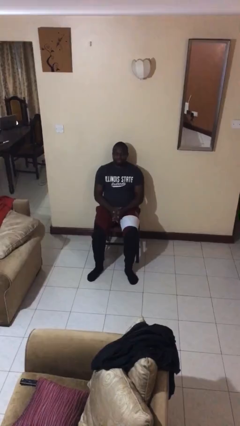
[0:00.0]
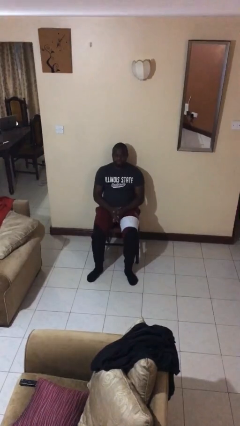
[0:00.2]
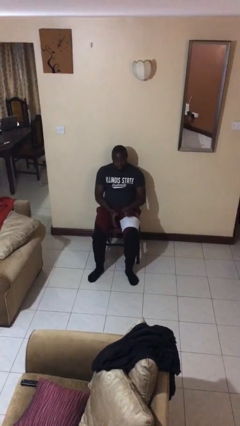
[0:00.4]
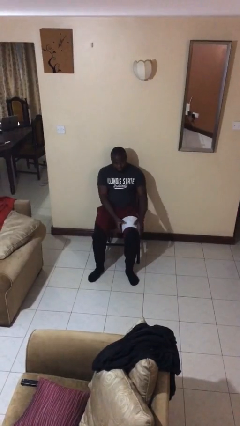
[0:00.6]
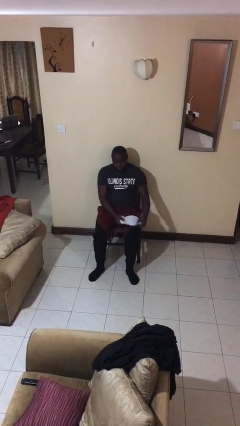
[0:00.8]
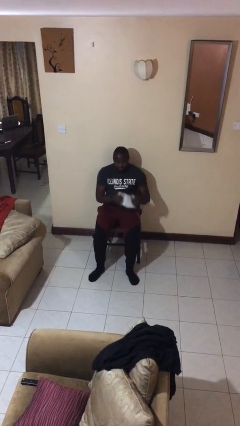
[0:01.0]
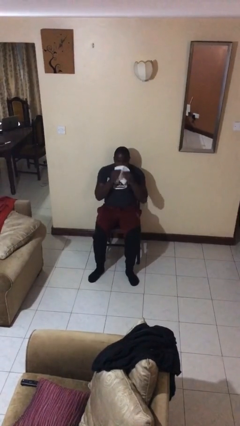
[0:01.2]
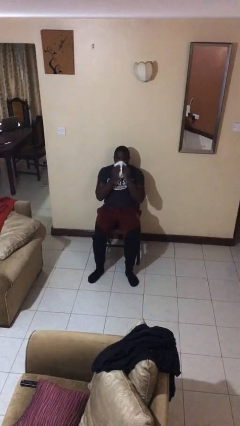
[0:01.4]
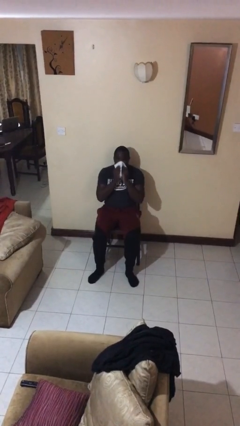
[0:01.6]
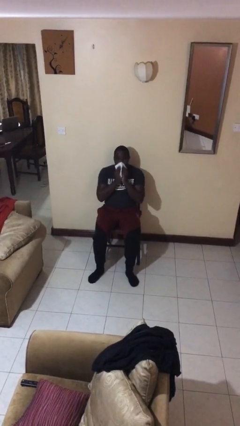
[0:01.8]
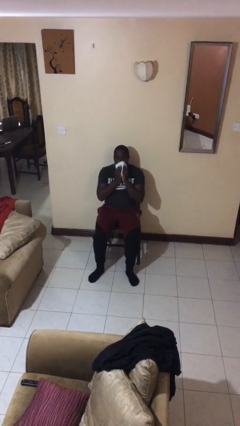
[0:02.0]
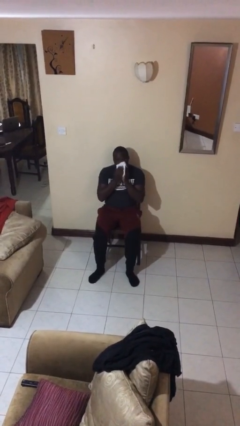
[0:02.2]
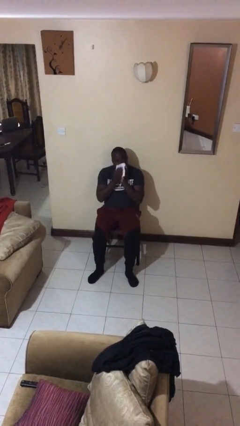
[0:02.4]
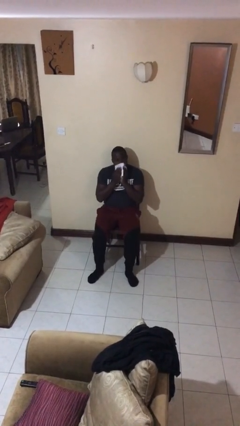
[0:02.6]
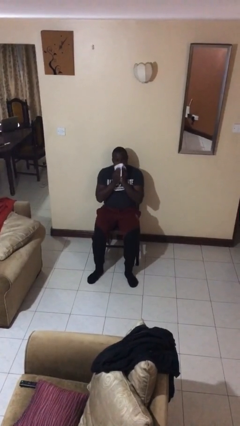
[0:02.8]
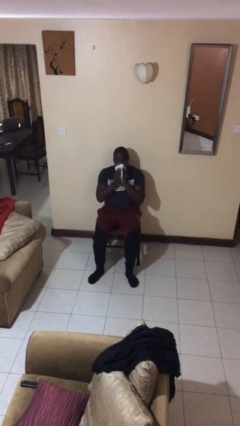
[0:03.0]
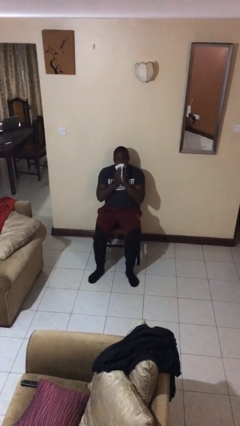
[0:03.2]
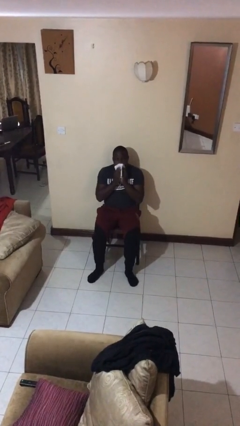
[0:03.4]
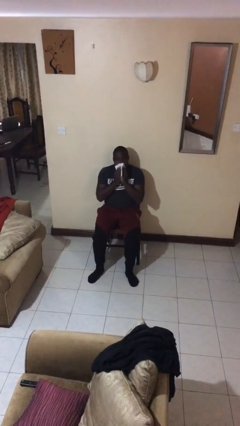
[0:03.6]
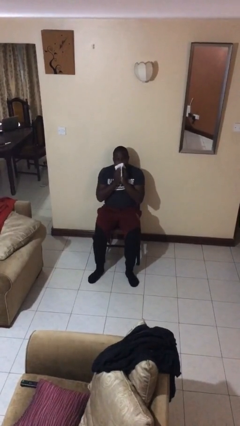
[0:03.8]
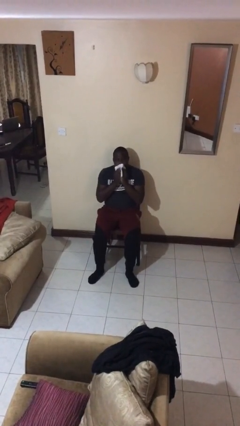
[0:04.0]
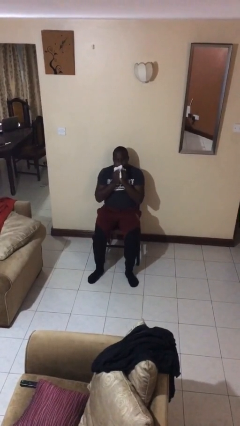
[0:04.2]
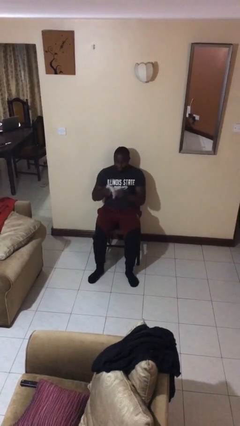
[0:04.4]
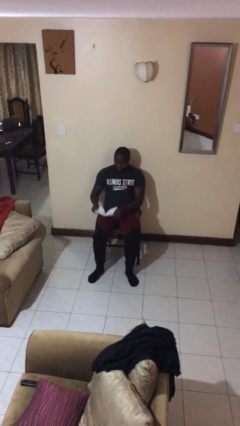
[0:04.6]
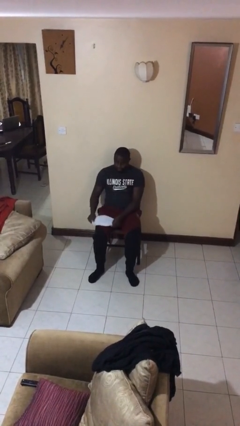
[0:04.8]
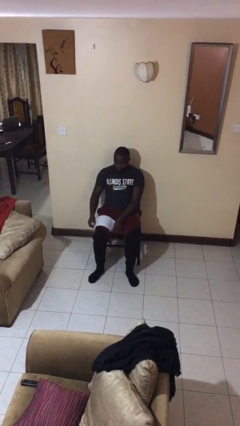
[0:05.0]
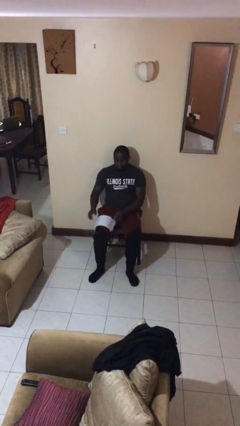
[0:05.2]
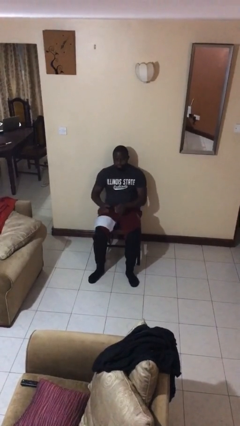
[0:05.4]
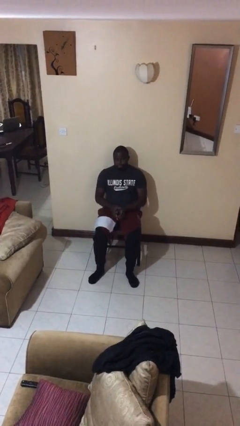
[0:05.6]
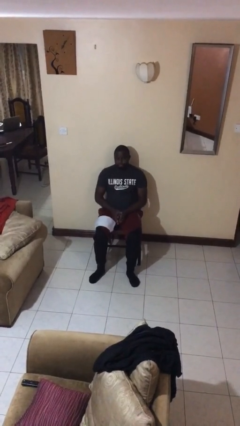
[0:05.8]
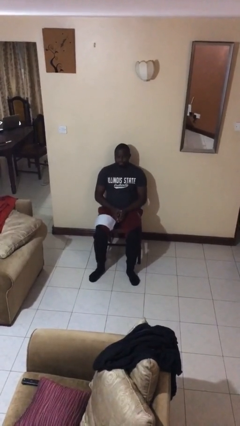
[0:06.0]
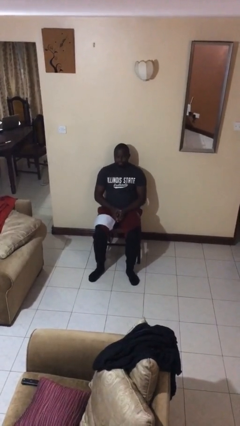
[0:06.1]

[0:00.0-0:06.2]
person wipes mouth with napkin

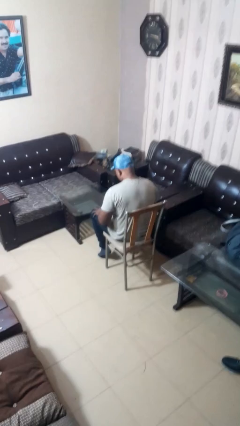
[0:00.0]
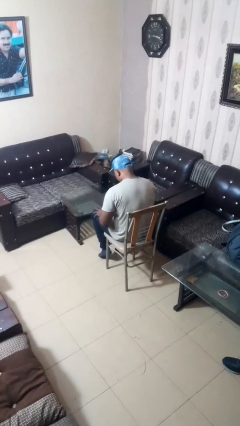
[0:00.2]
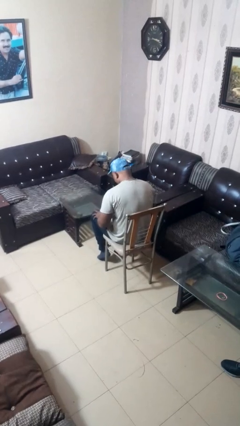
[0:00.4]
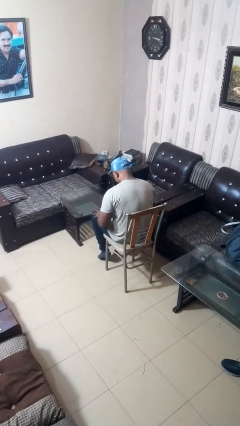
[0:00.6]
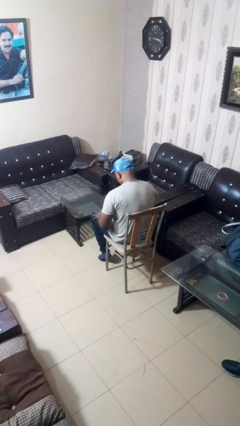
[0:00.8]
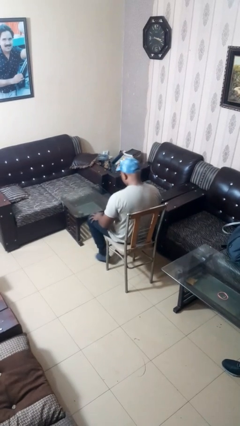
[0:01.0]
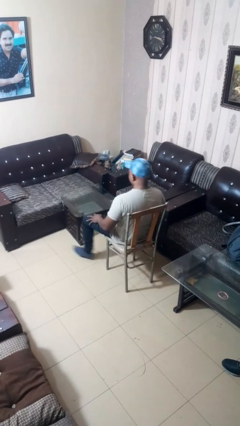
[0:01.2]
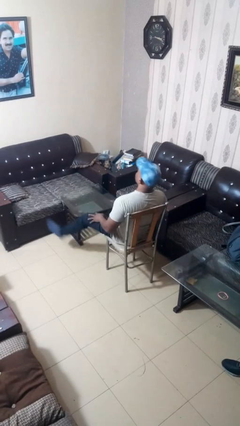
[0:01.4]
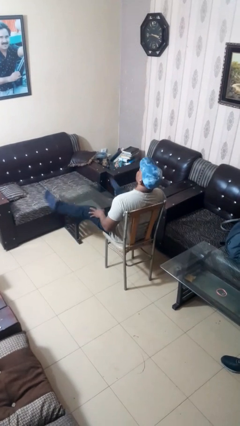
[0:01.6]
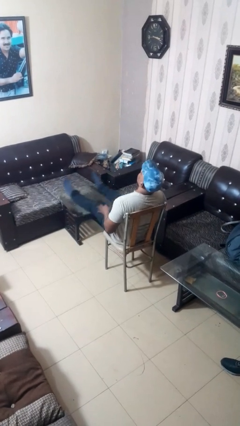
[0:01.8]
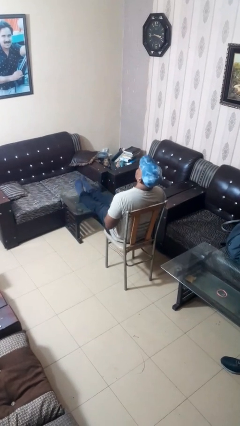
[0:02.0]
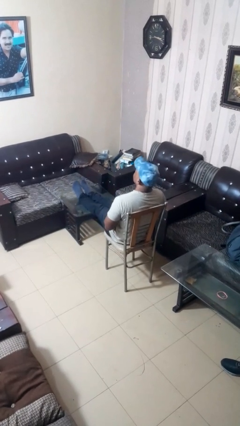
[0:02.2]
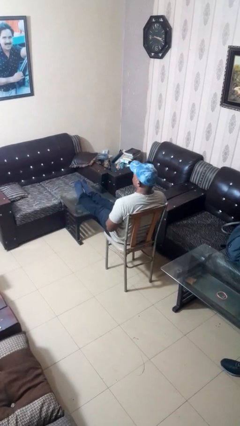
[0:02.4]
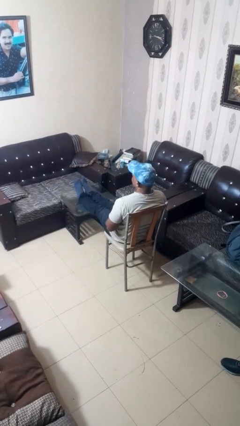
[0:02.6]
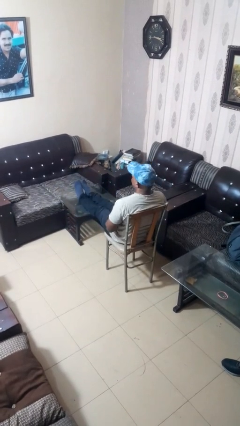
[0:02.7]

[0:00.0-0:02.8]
person puts feet up

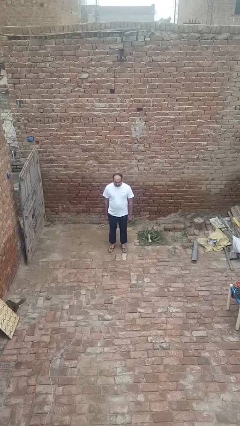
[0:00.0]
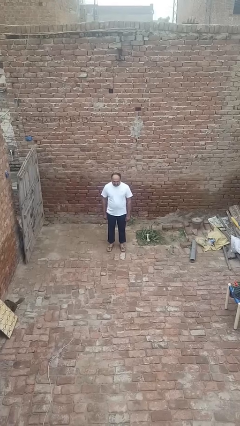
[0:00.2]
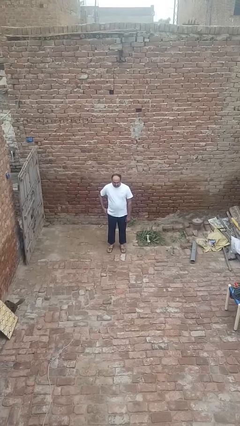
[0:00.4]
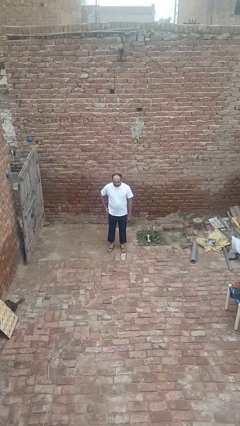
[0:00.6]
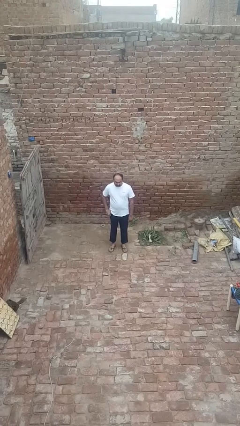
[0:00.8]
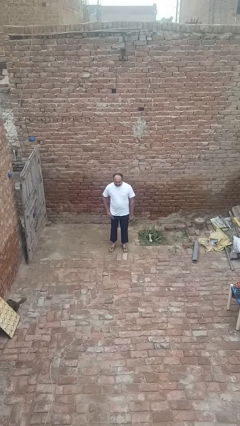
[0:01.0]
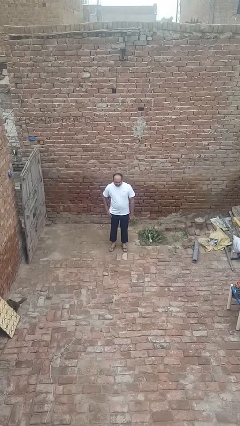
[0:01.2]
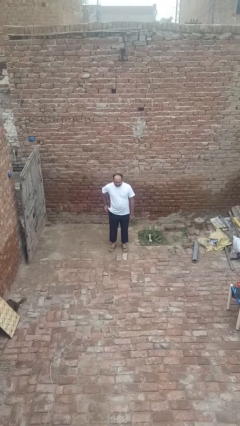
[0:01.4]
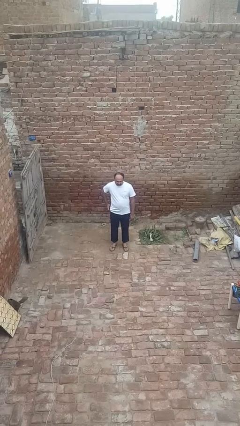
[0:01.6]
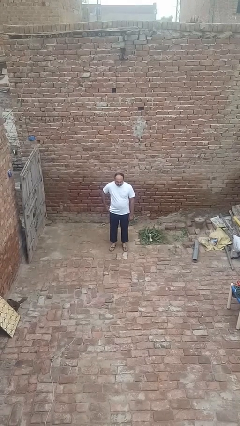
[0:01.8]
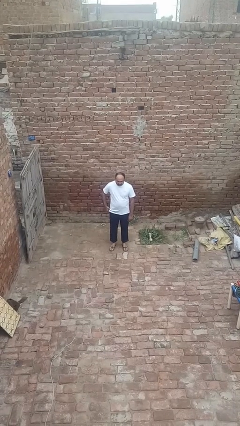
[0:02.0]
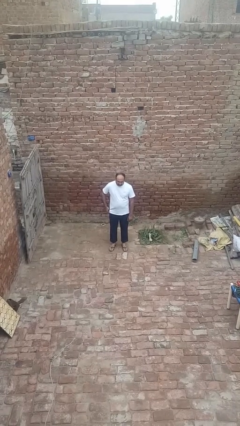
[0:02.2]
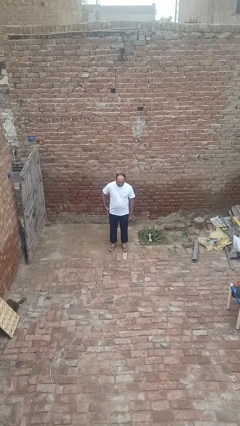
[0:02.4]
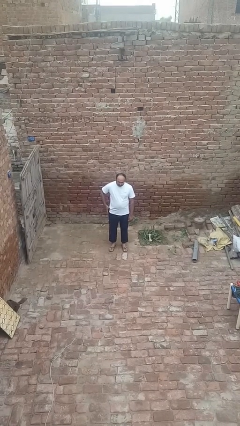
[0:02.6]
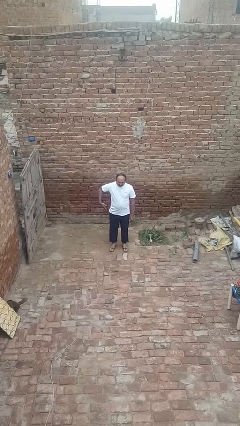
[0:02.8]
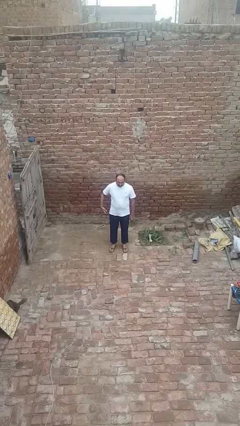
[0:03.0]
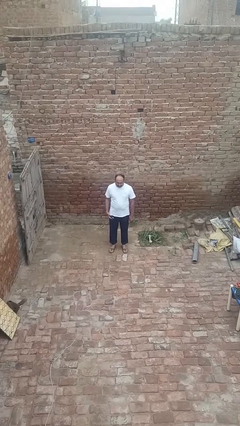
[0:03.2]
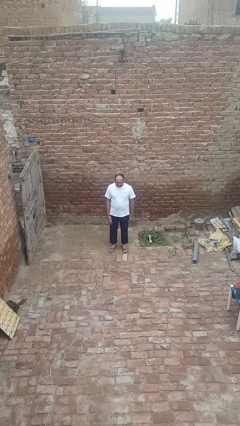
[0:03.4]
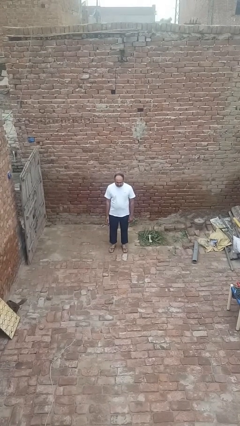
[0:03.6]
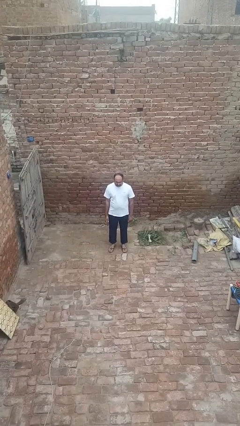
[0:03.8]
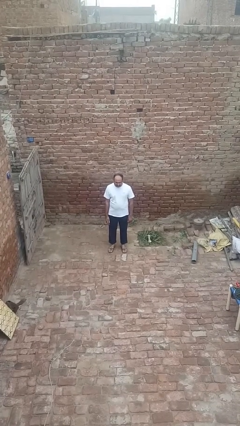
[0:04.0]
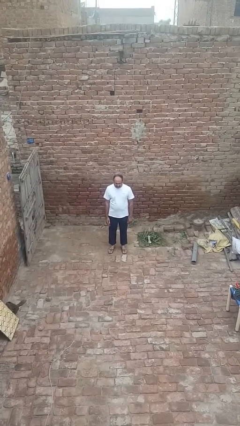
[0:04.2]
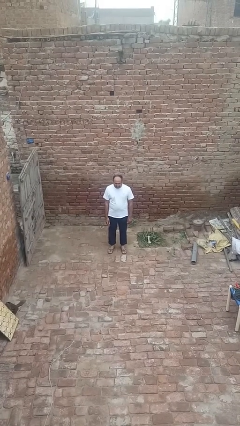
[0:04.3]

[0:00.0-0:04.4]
person takes phone from pocket

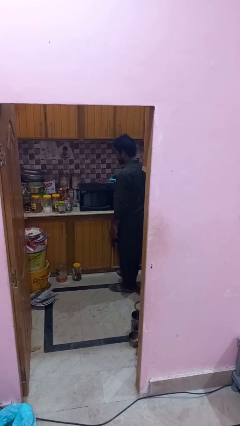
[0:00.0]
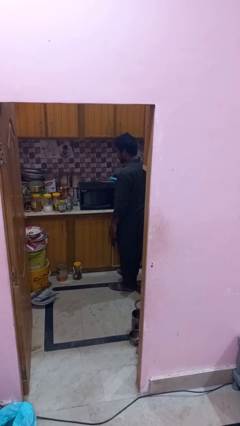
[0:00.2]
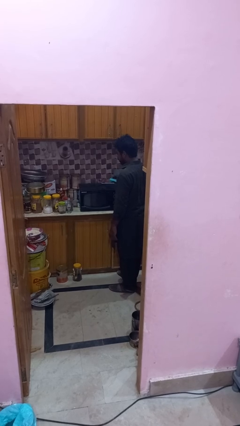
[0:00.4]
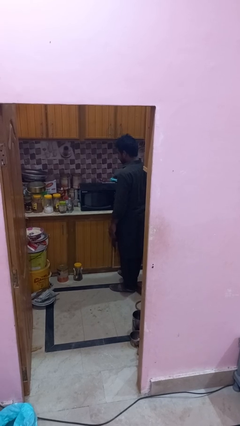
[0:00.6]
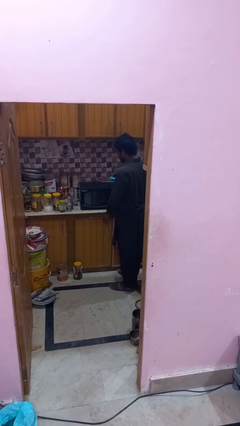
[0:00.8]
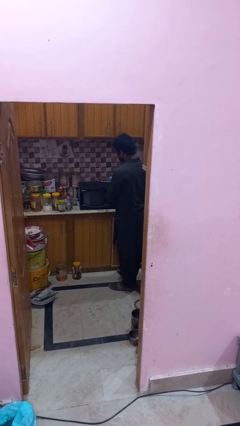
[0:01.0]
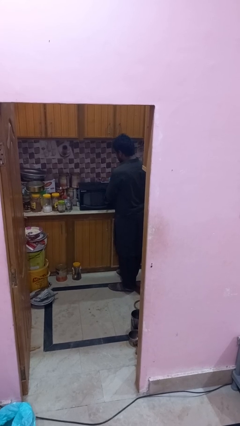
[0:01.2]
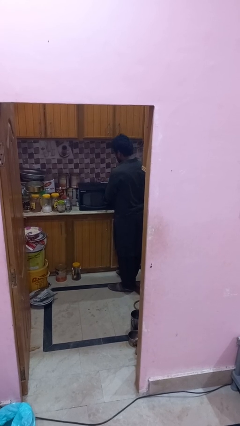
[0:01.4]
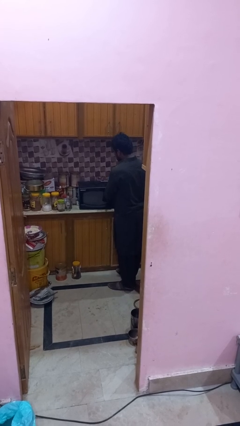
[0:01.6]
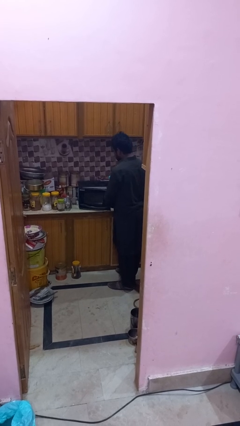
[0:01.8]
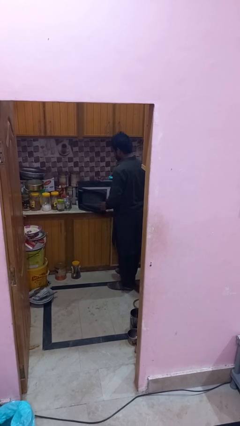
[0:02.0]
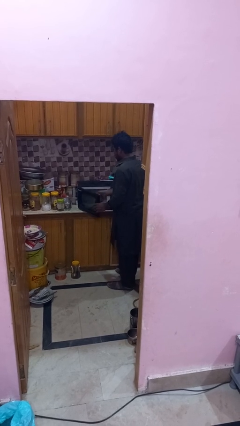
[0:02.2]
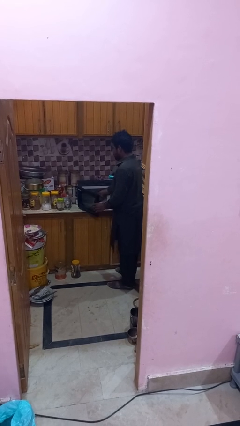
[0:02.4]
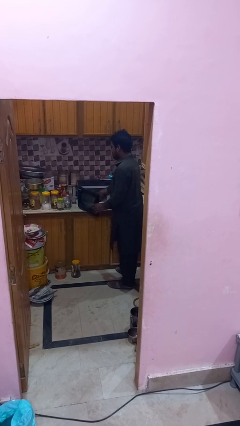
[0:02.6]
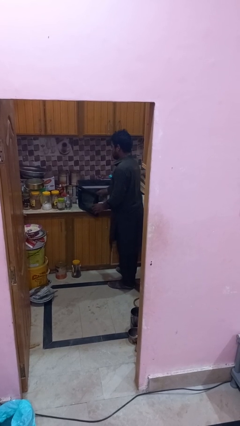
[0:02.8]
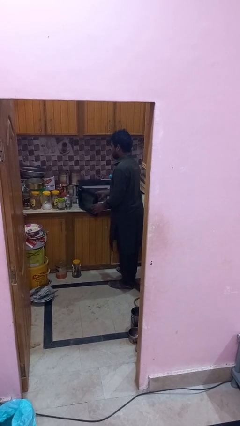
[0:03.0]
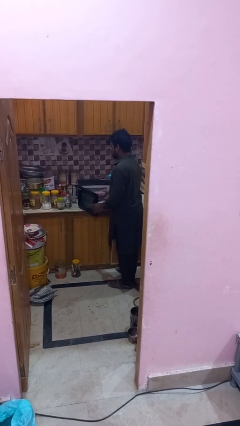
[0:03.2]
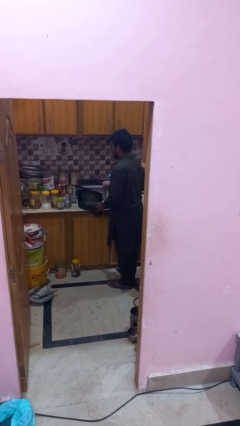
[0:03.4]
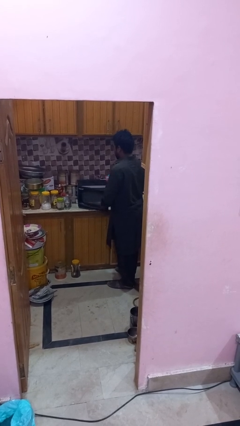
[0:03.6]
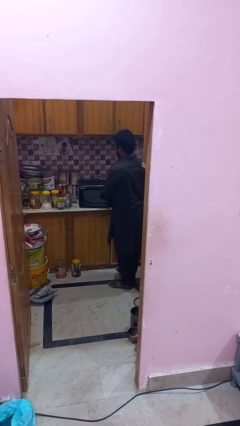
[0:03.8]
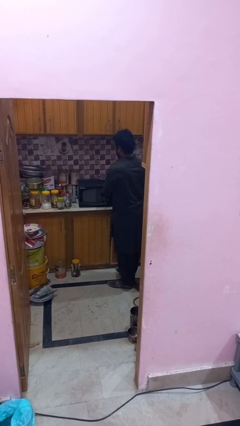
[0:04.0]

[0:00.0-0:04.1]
person takes object from microwave

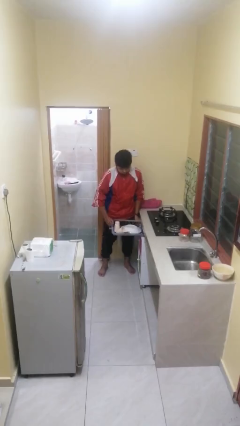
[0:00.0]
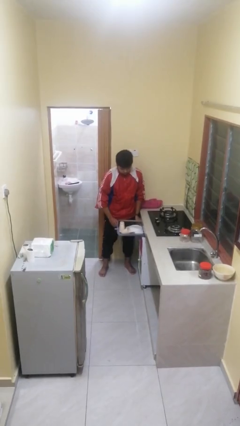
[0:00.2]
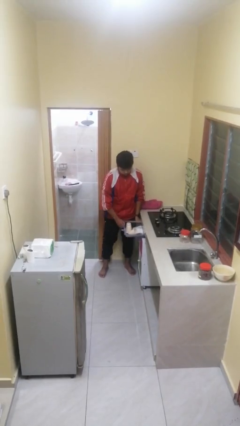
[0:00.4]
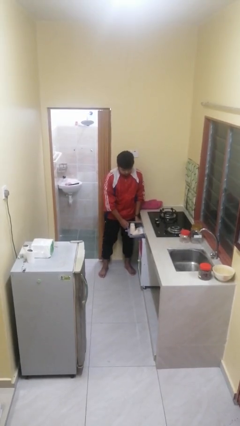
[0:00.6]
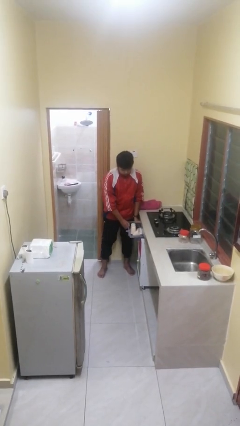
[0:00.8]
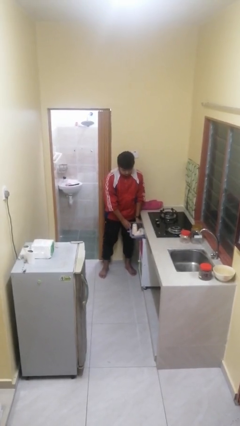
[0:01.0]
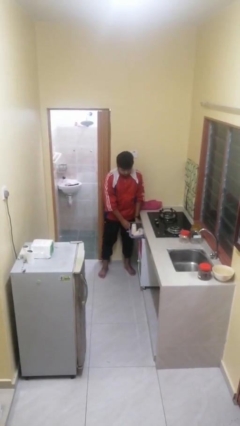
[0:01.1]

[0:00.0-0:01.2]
person closes kitchen drawer
